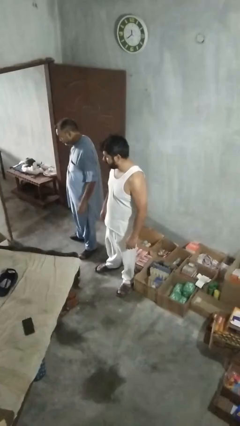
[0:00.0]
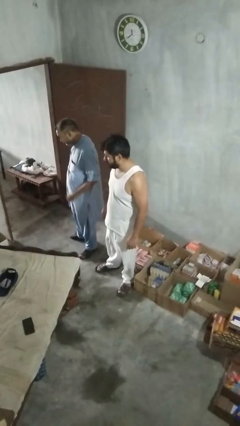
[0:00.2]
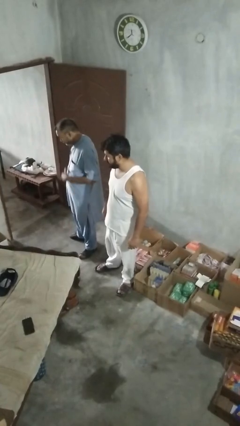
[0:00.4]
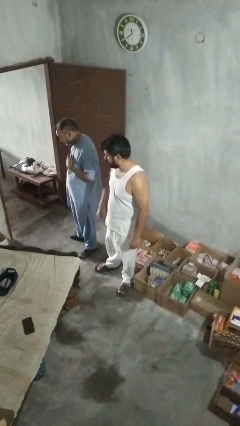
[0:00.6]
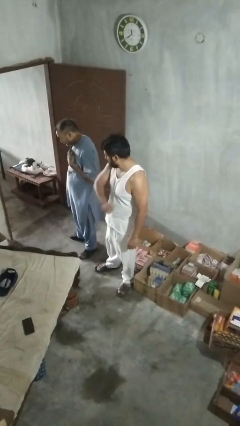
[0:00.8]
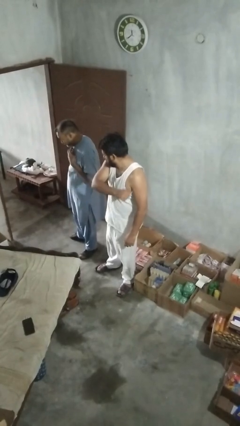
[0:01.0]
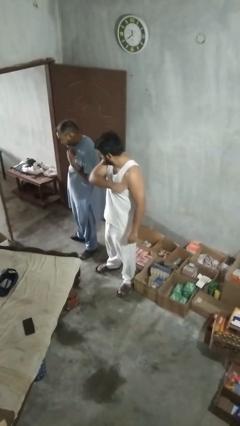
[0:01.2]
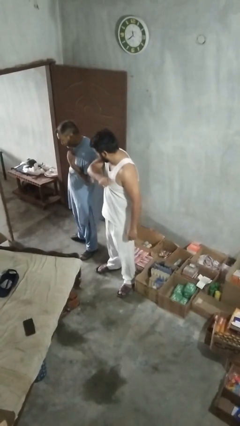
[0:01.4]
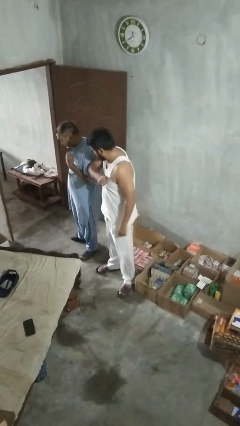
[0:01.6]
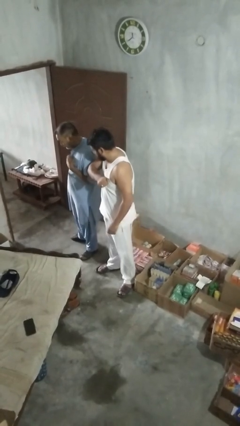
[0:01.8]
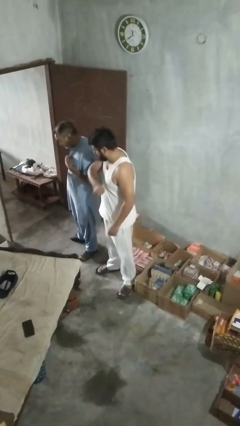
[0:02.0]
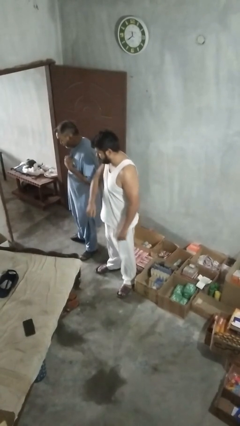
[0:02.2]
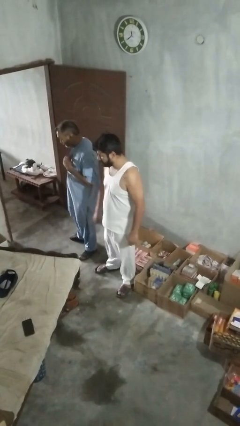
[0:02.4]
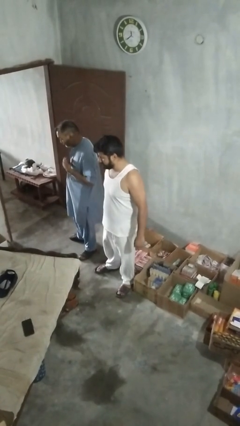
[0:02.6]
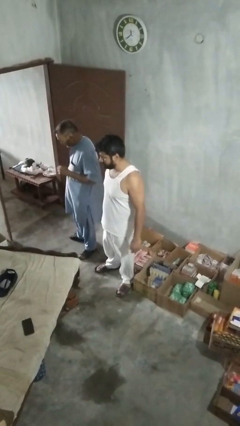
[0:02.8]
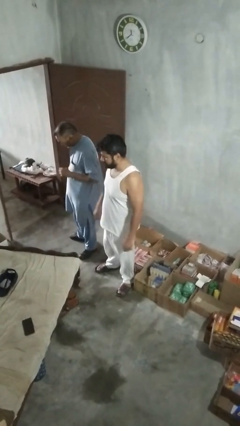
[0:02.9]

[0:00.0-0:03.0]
person nudges person with elbow

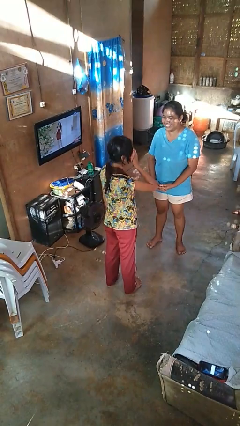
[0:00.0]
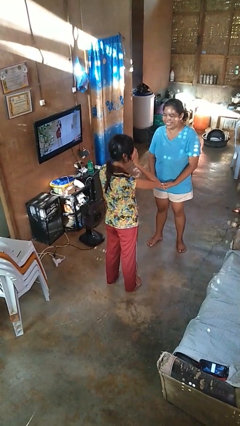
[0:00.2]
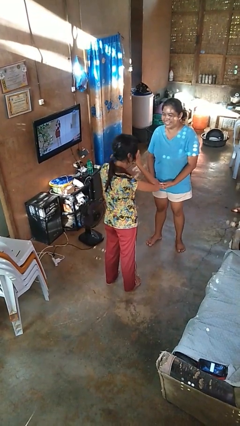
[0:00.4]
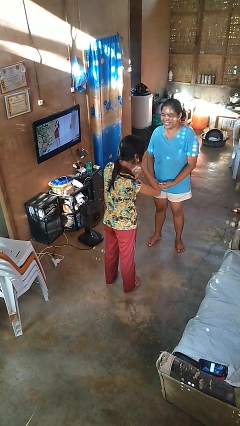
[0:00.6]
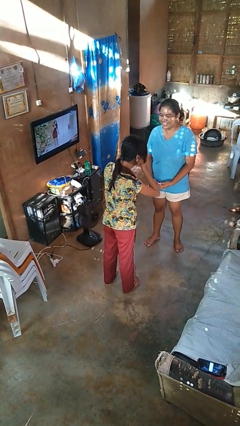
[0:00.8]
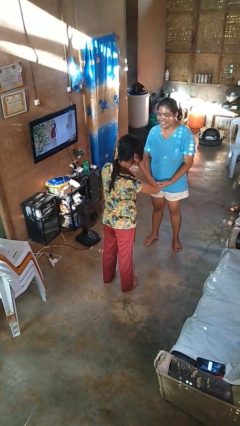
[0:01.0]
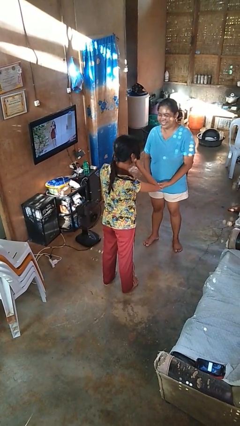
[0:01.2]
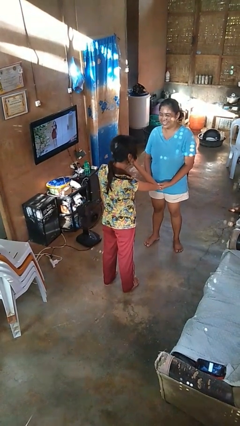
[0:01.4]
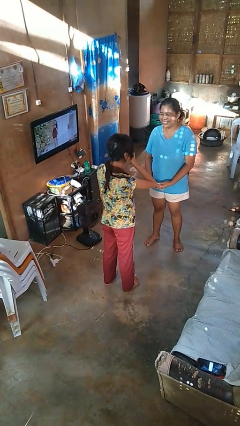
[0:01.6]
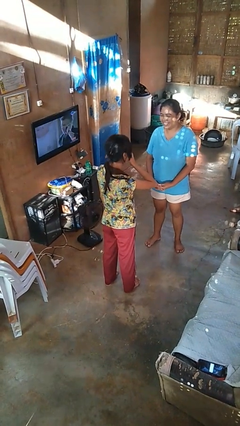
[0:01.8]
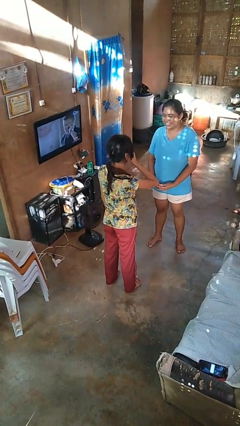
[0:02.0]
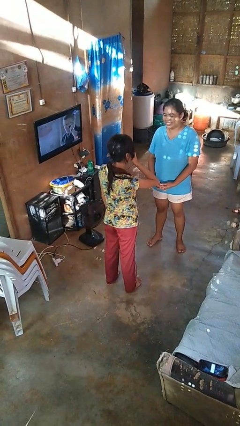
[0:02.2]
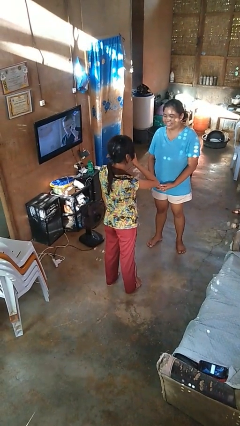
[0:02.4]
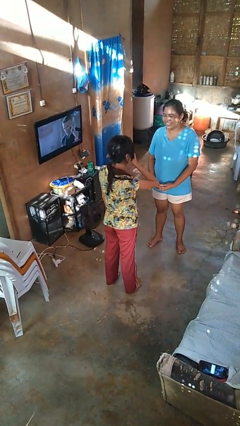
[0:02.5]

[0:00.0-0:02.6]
person laughs with person

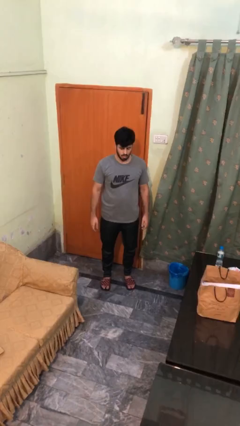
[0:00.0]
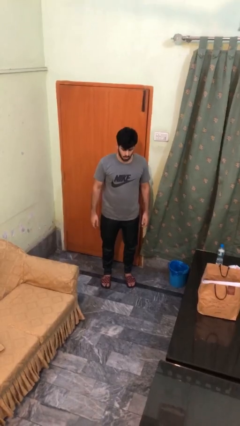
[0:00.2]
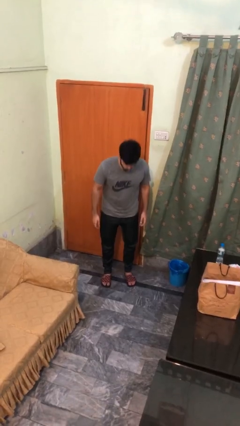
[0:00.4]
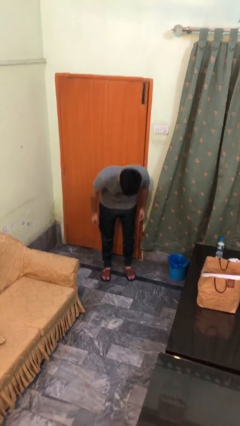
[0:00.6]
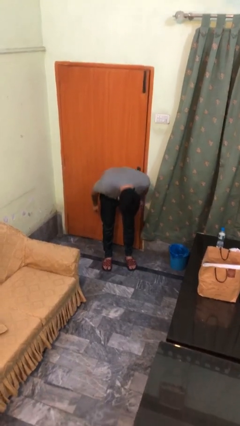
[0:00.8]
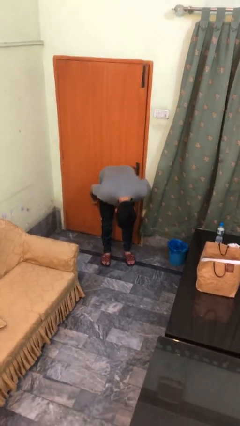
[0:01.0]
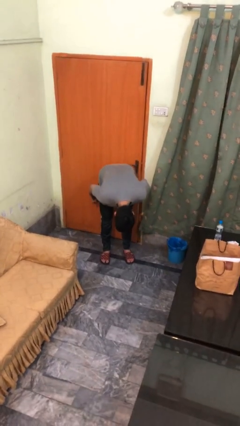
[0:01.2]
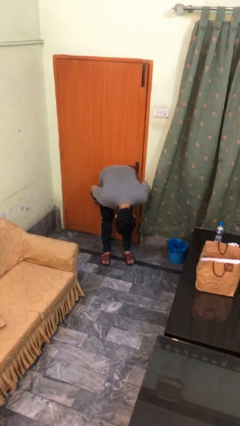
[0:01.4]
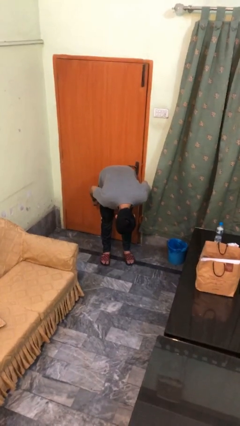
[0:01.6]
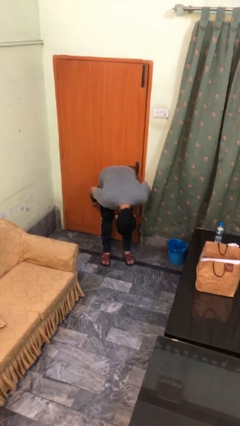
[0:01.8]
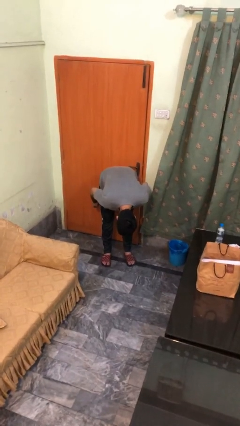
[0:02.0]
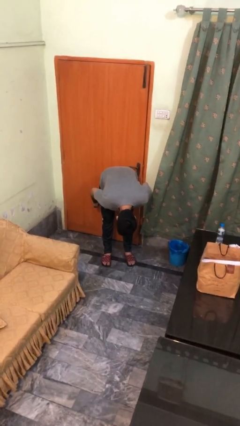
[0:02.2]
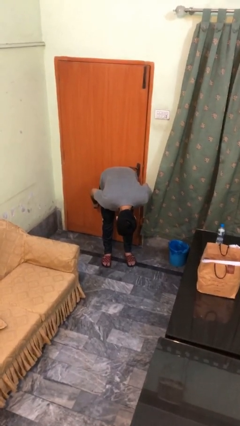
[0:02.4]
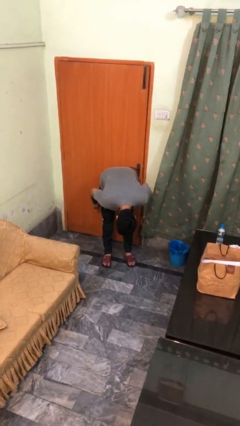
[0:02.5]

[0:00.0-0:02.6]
person bows

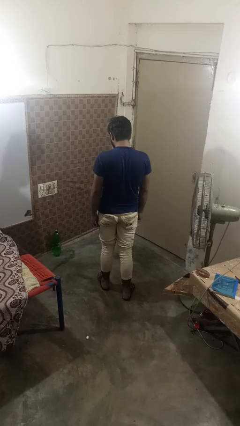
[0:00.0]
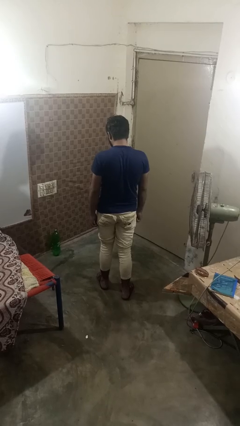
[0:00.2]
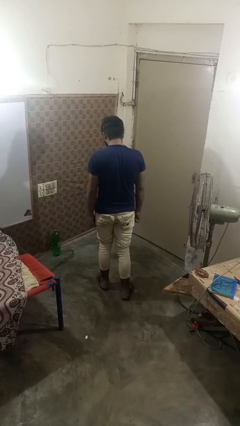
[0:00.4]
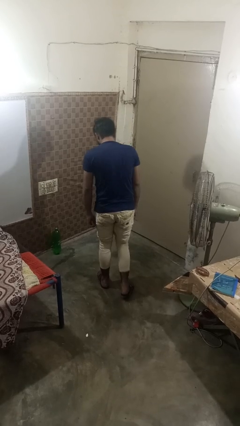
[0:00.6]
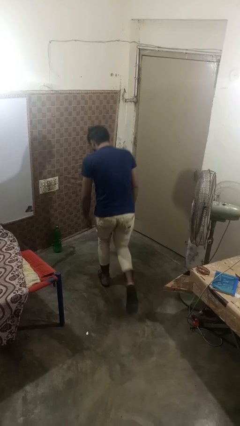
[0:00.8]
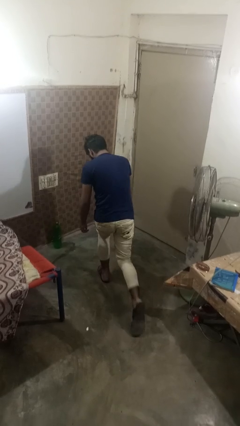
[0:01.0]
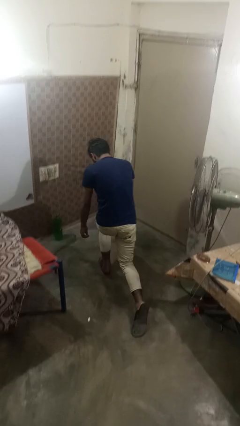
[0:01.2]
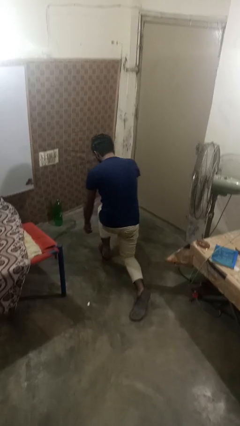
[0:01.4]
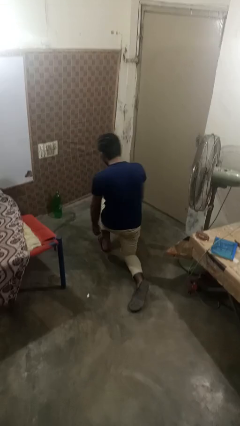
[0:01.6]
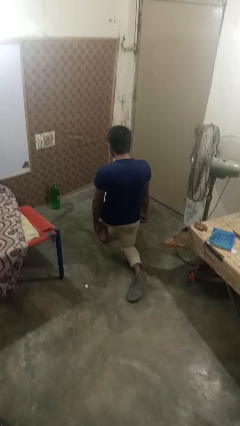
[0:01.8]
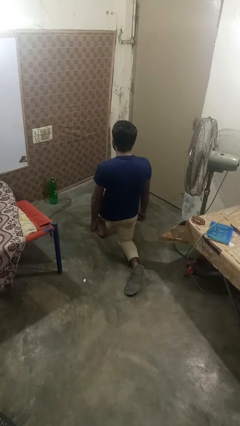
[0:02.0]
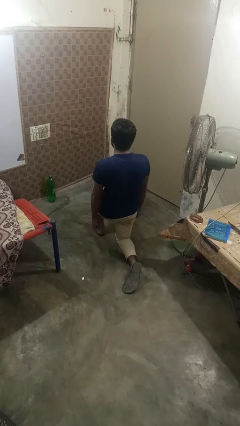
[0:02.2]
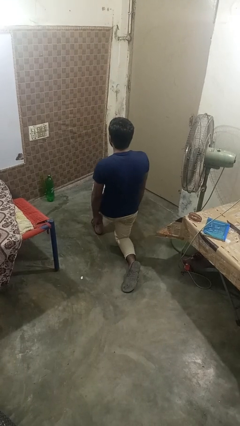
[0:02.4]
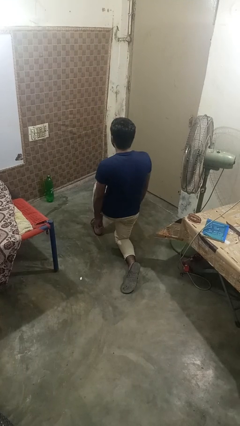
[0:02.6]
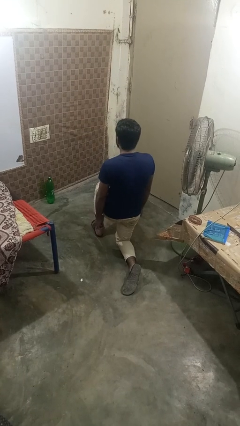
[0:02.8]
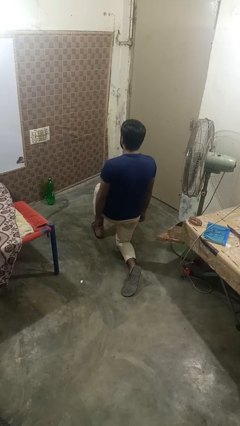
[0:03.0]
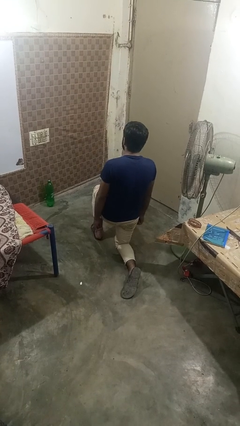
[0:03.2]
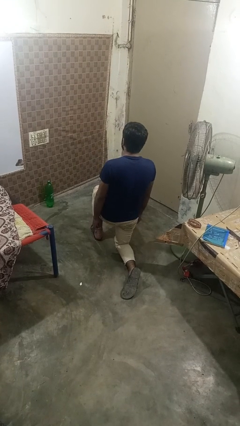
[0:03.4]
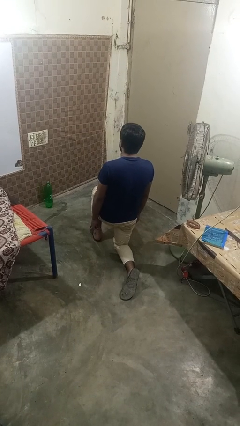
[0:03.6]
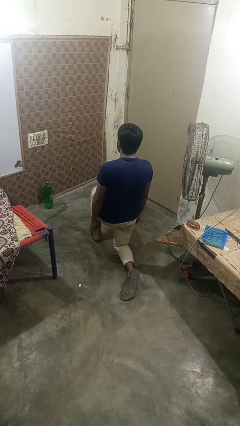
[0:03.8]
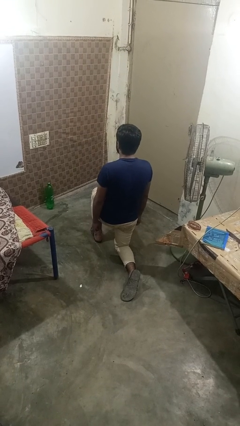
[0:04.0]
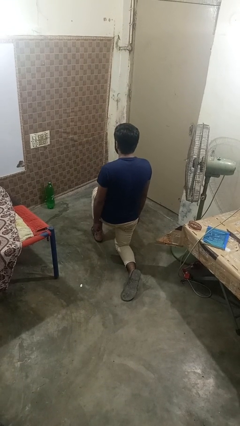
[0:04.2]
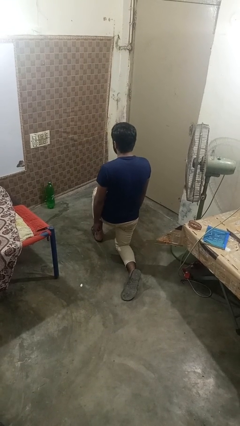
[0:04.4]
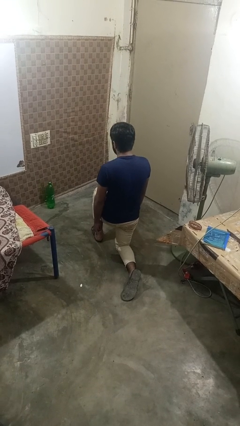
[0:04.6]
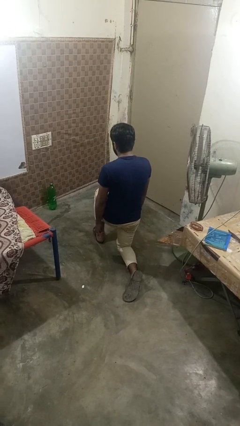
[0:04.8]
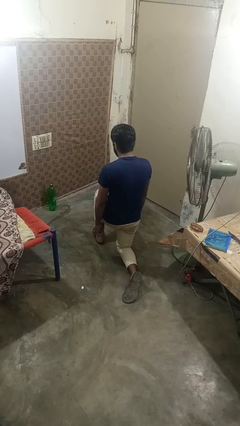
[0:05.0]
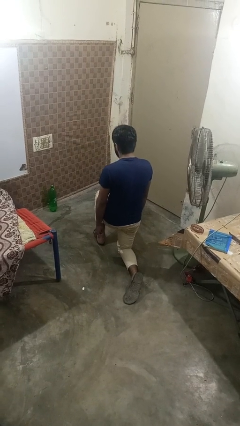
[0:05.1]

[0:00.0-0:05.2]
person kneels

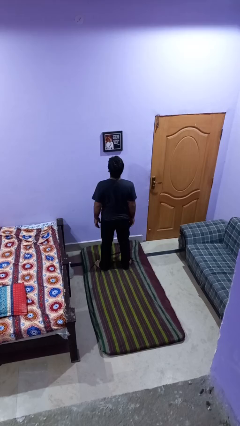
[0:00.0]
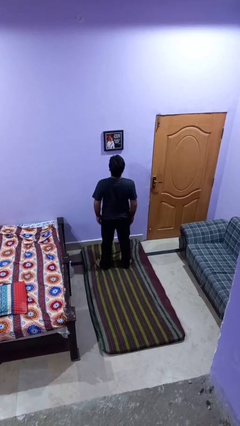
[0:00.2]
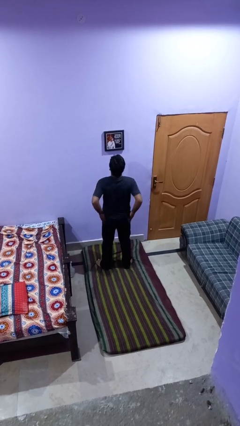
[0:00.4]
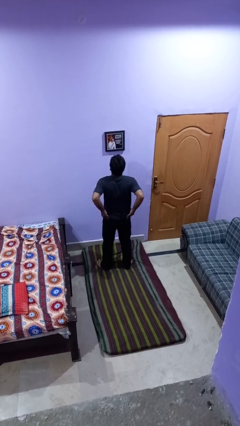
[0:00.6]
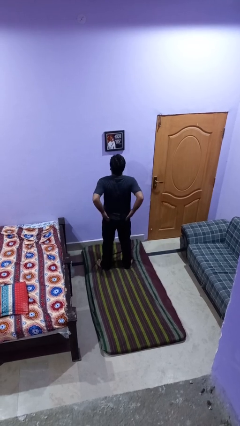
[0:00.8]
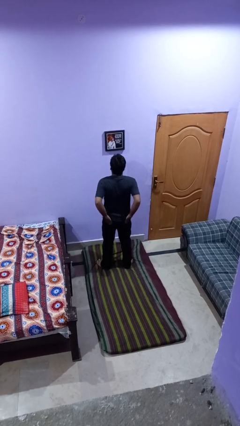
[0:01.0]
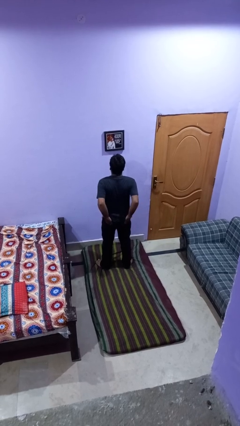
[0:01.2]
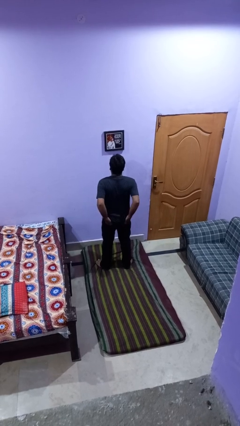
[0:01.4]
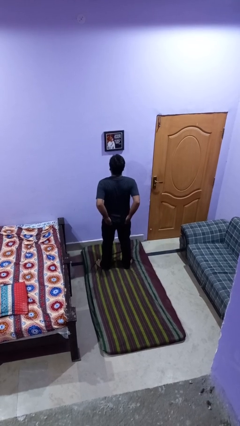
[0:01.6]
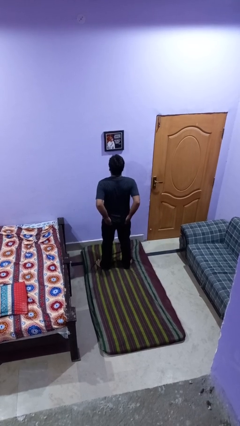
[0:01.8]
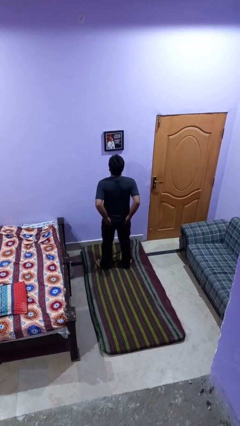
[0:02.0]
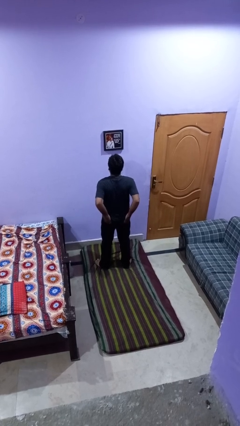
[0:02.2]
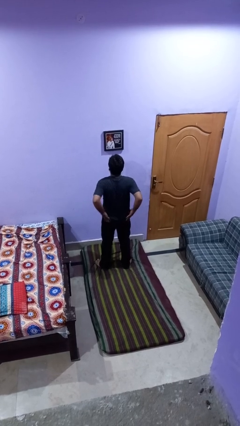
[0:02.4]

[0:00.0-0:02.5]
person puts hands in back pockets

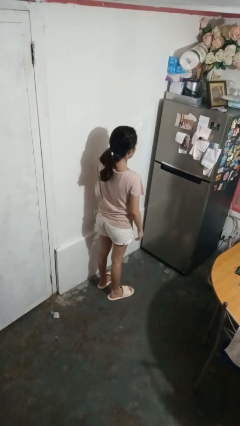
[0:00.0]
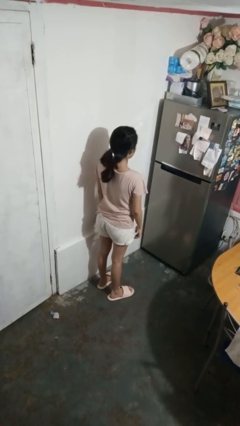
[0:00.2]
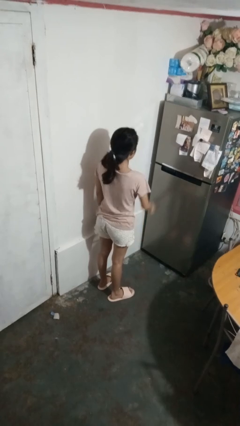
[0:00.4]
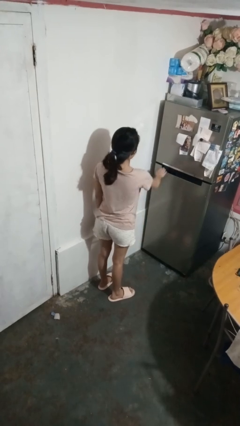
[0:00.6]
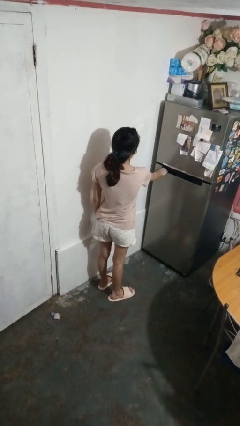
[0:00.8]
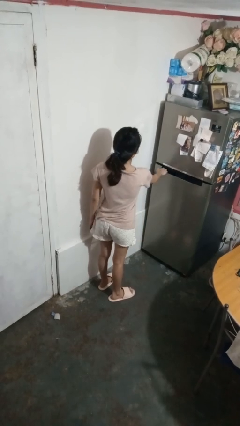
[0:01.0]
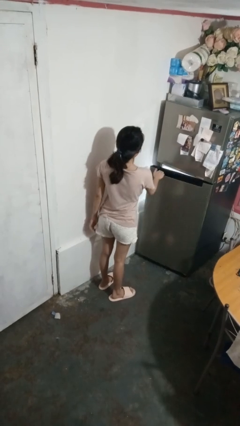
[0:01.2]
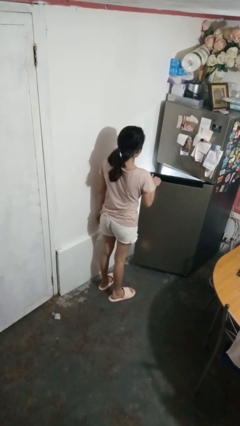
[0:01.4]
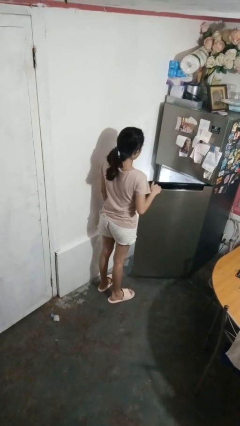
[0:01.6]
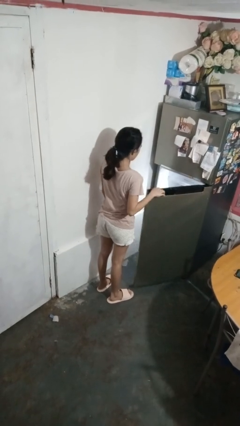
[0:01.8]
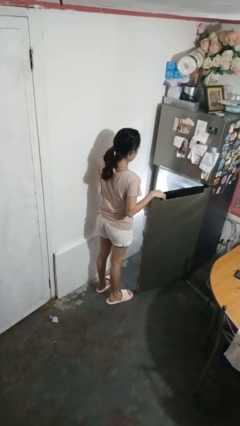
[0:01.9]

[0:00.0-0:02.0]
person opens refrigerator
